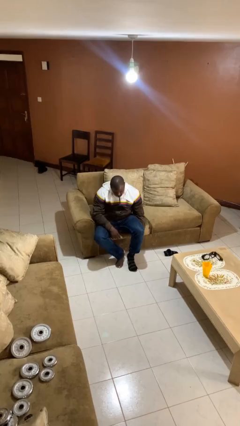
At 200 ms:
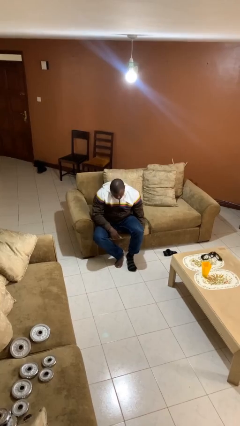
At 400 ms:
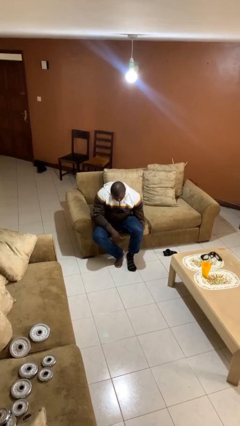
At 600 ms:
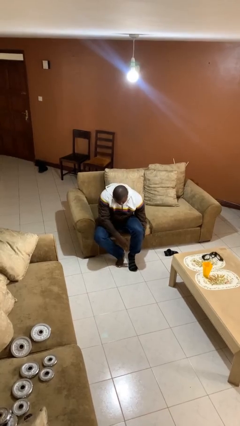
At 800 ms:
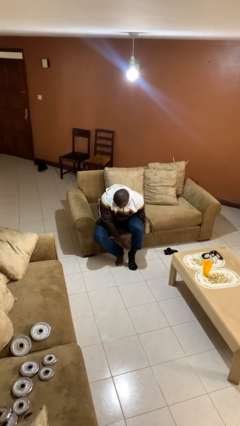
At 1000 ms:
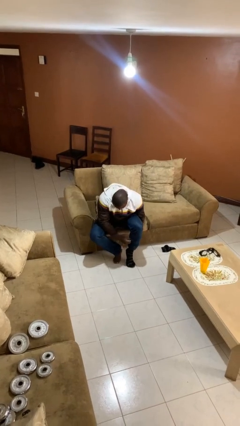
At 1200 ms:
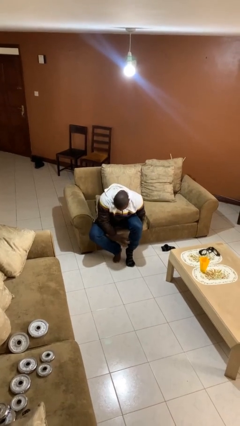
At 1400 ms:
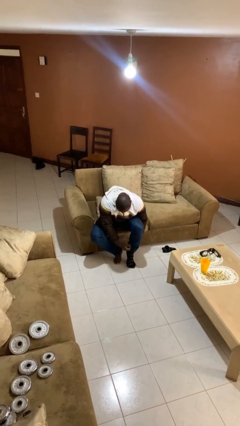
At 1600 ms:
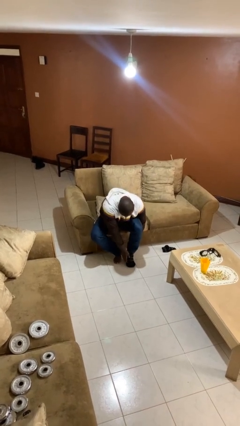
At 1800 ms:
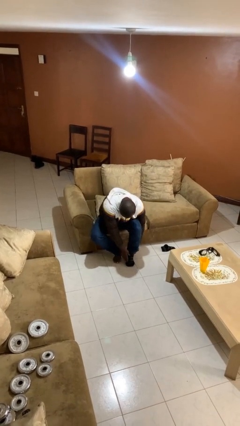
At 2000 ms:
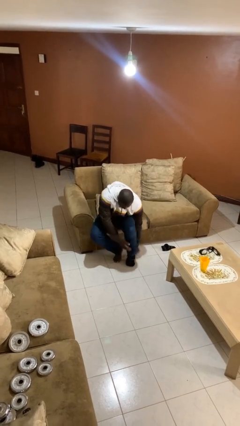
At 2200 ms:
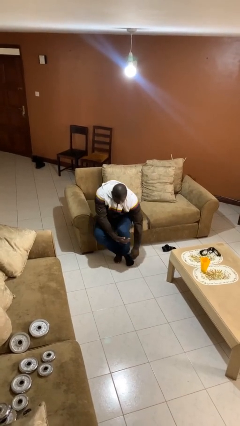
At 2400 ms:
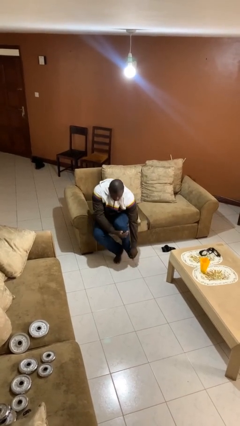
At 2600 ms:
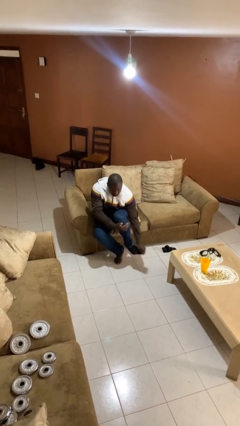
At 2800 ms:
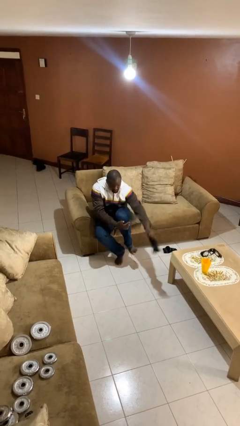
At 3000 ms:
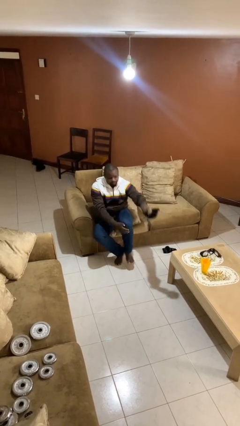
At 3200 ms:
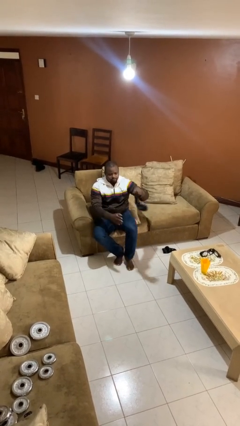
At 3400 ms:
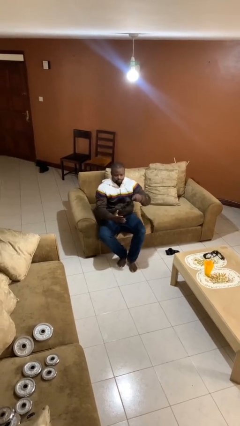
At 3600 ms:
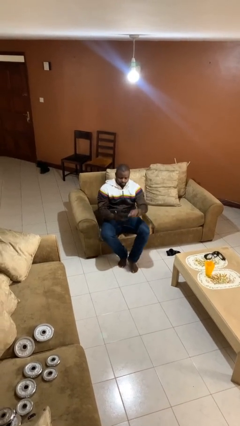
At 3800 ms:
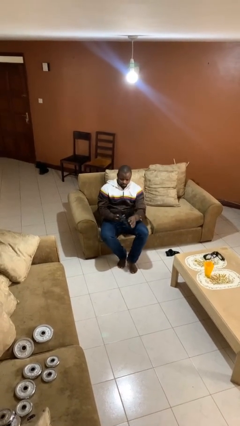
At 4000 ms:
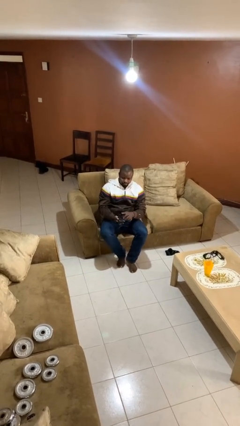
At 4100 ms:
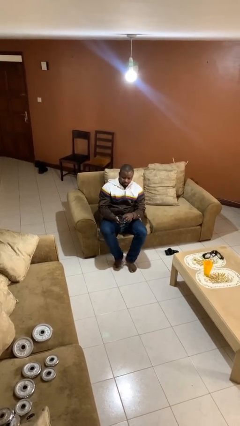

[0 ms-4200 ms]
person takes off socks

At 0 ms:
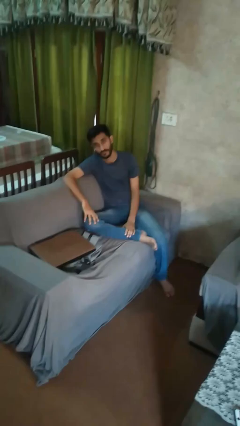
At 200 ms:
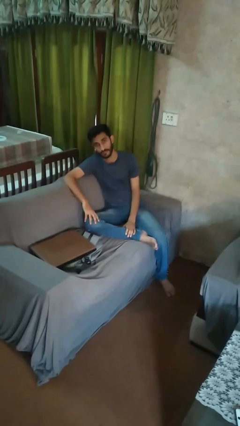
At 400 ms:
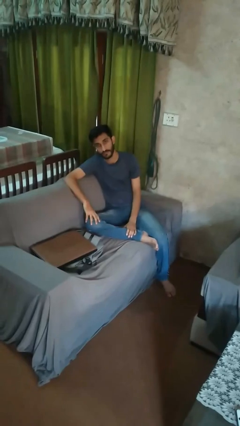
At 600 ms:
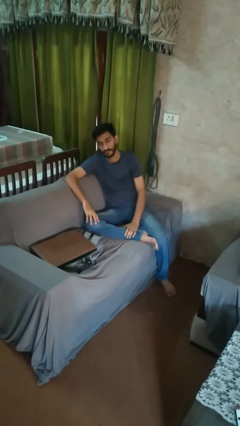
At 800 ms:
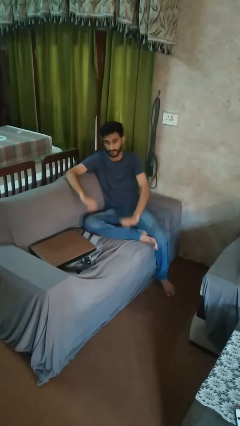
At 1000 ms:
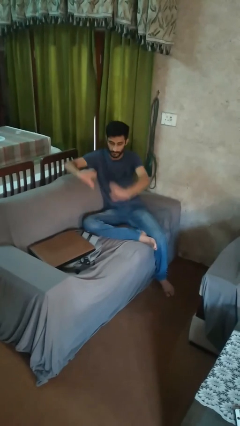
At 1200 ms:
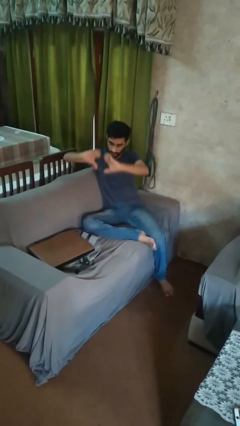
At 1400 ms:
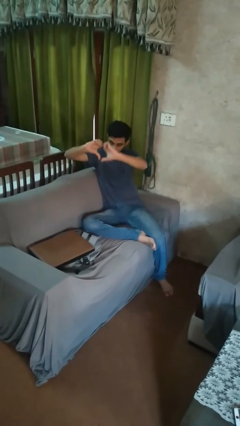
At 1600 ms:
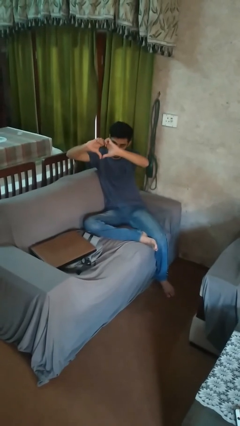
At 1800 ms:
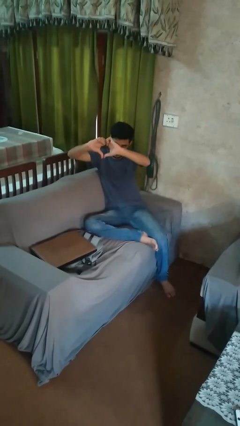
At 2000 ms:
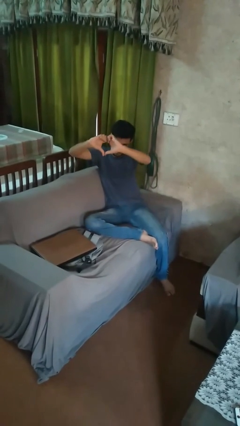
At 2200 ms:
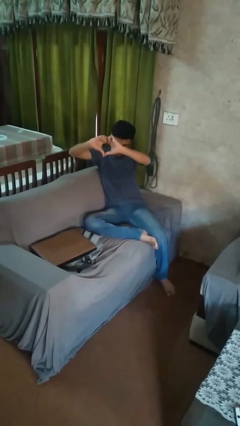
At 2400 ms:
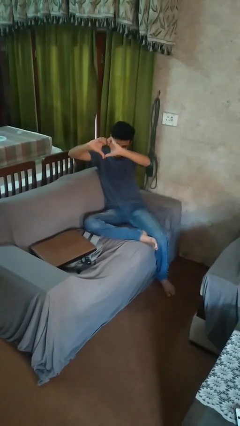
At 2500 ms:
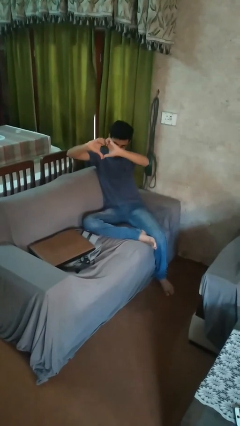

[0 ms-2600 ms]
person gestures heart

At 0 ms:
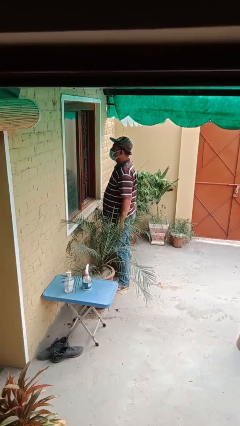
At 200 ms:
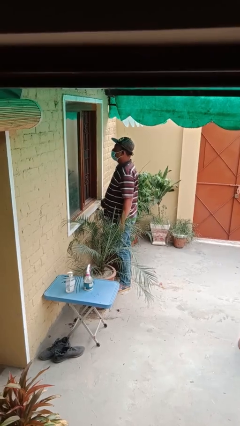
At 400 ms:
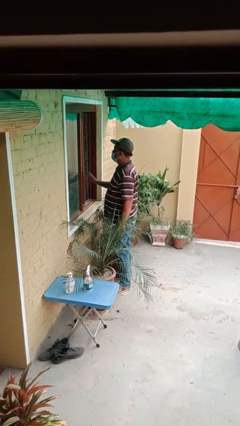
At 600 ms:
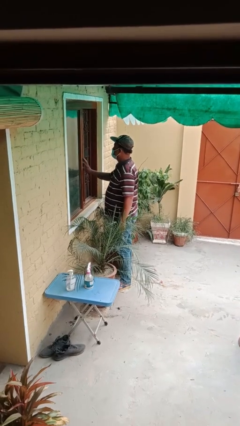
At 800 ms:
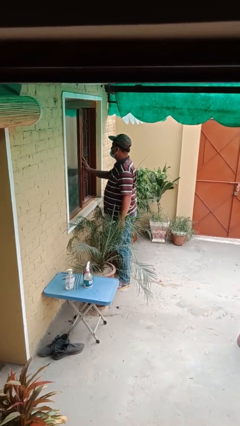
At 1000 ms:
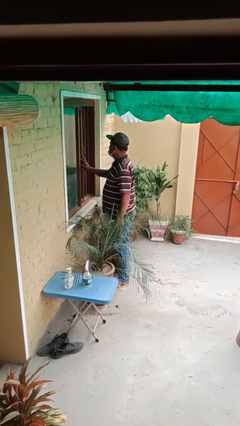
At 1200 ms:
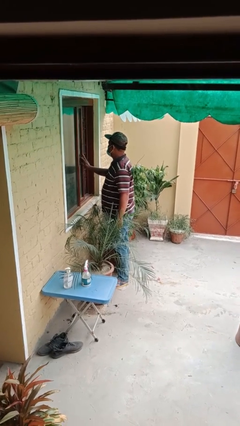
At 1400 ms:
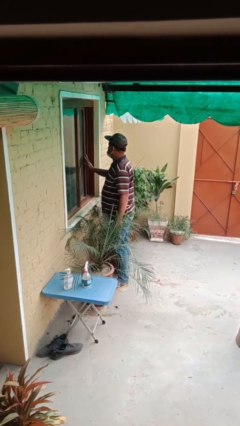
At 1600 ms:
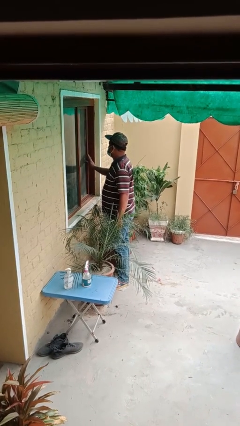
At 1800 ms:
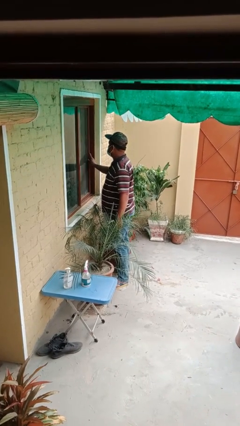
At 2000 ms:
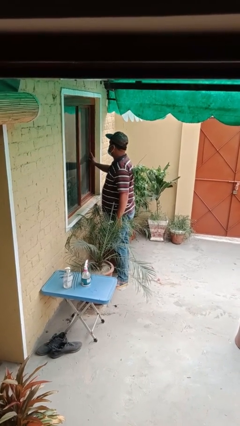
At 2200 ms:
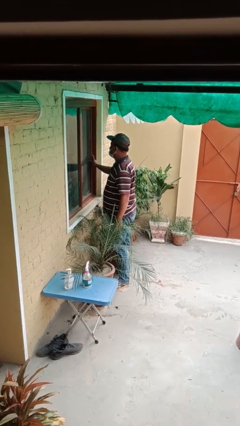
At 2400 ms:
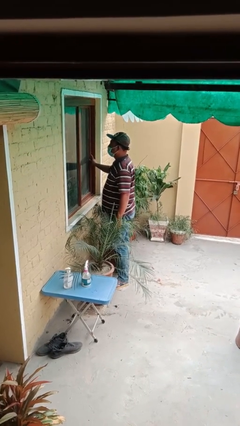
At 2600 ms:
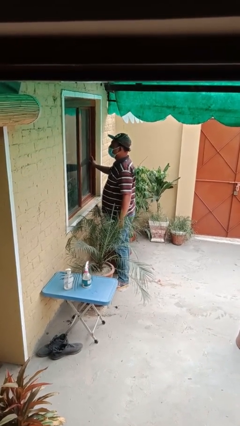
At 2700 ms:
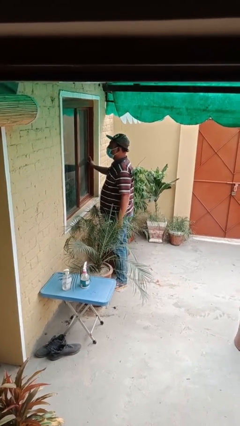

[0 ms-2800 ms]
person closes home window

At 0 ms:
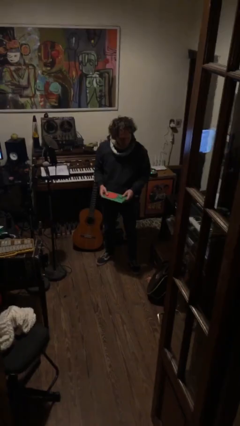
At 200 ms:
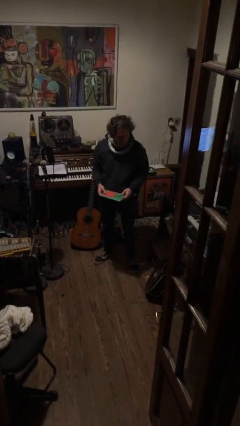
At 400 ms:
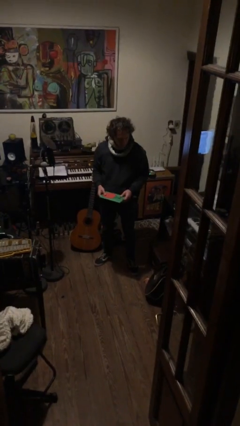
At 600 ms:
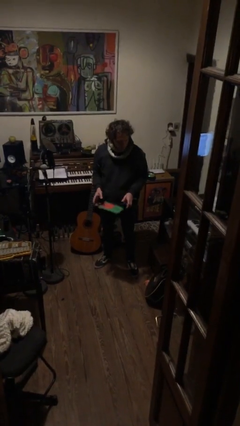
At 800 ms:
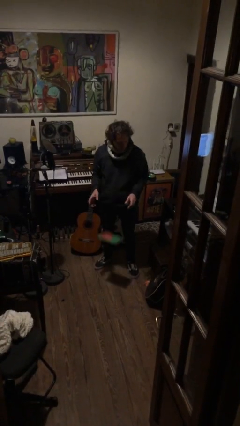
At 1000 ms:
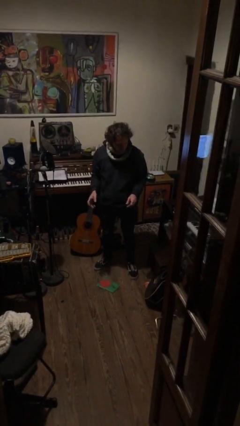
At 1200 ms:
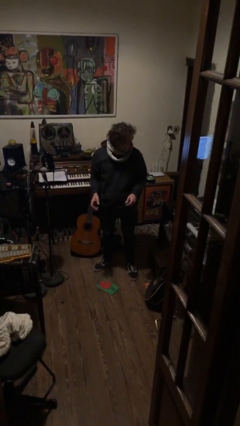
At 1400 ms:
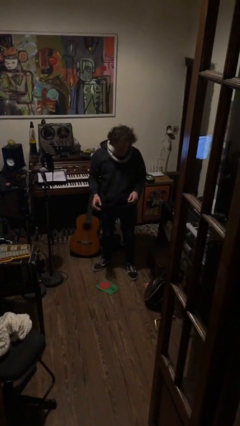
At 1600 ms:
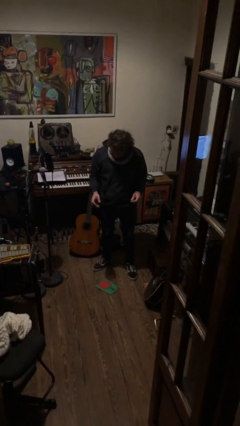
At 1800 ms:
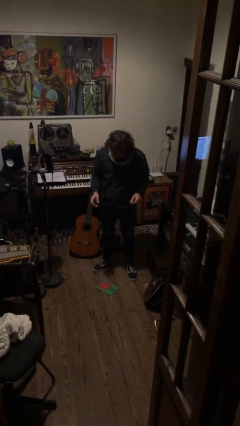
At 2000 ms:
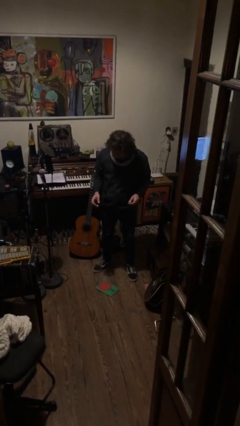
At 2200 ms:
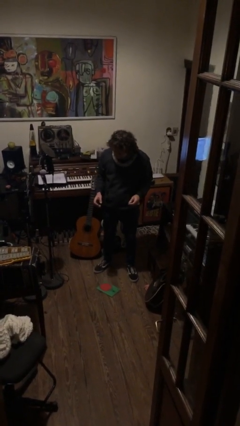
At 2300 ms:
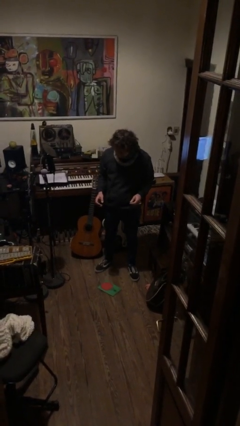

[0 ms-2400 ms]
person drops object

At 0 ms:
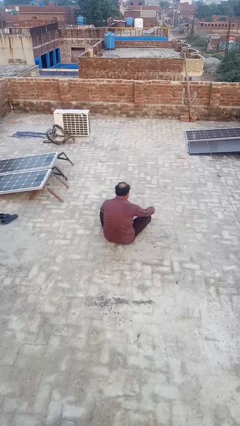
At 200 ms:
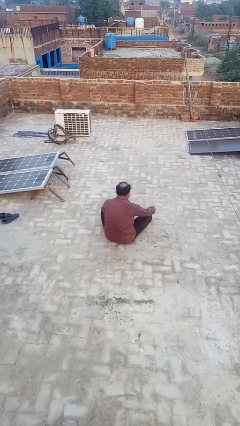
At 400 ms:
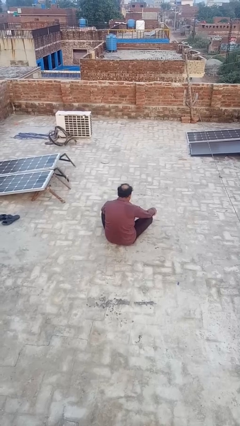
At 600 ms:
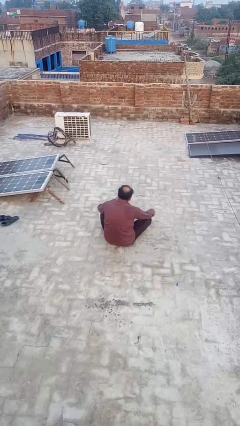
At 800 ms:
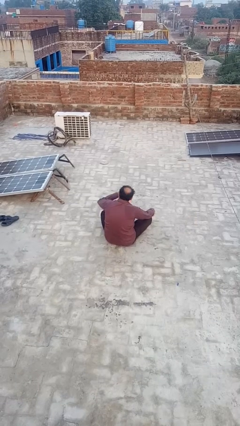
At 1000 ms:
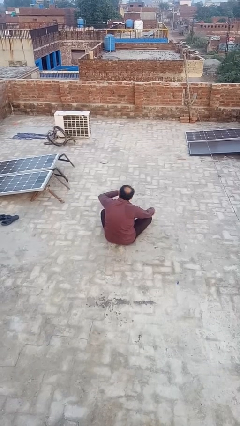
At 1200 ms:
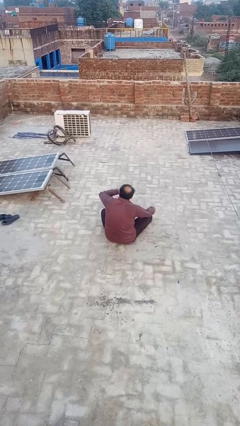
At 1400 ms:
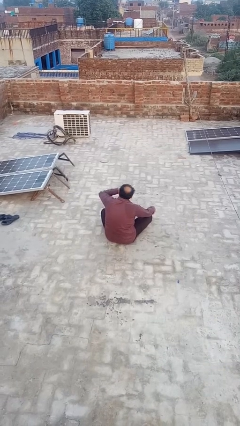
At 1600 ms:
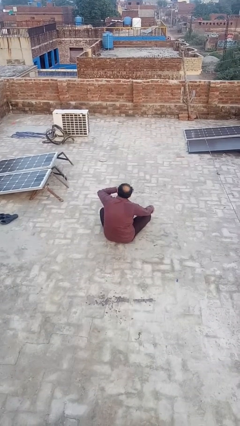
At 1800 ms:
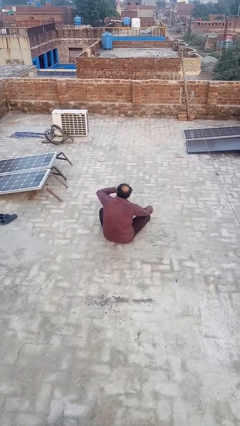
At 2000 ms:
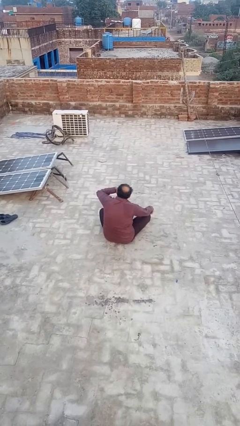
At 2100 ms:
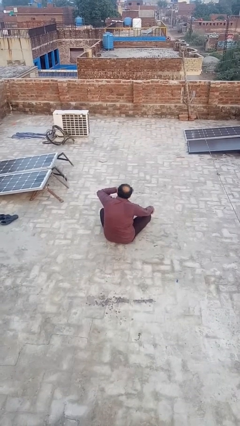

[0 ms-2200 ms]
person yawns

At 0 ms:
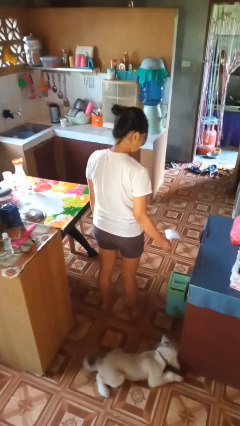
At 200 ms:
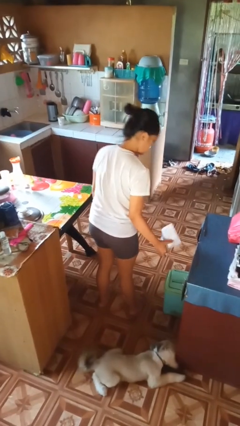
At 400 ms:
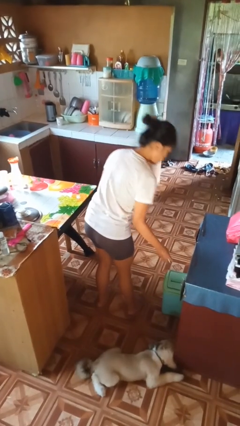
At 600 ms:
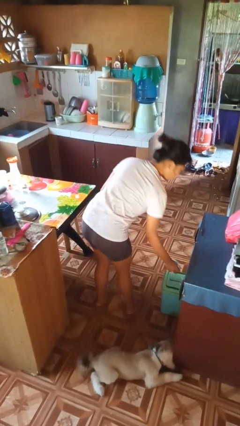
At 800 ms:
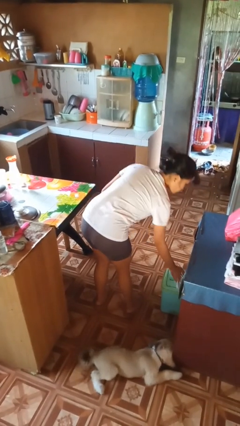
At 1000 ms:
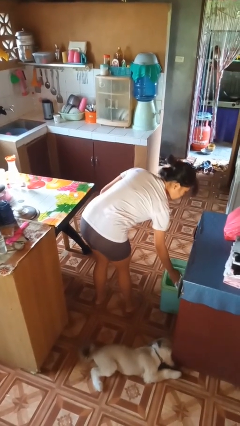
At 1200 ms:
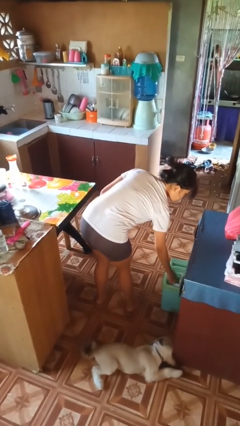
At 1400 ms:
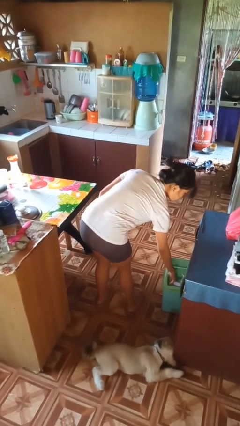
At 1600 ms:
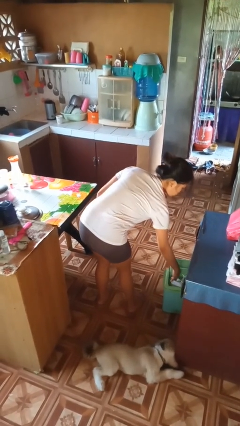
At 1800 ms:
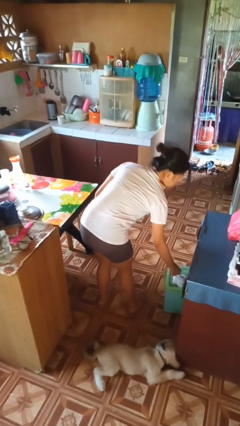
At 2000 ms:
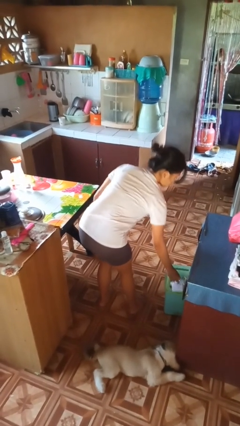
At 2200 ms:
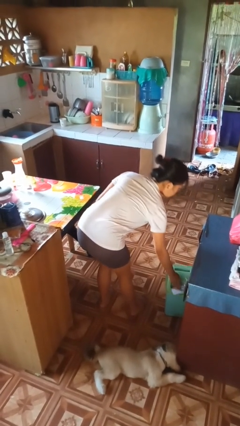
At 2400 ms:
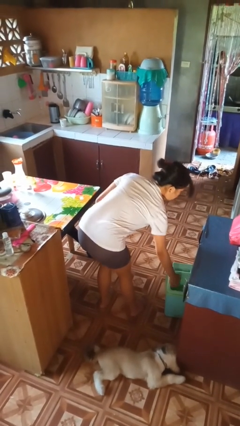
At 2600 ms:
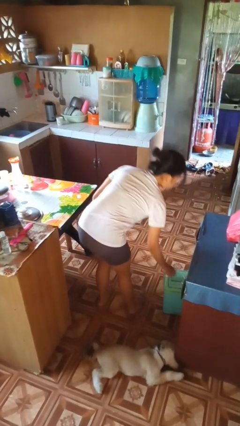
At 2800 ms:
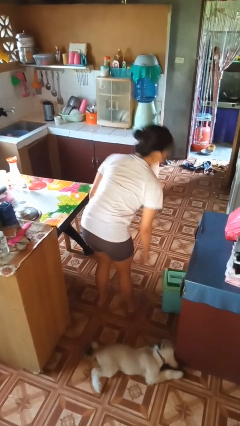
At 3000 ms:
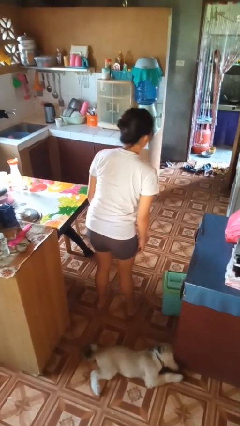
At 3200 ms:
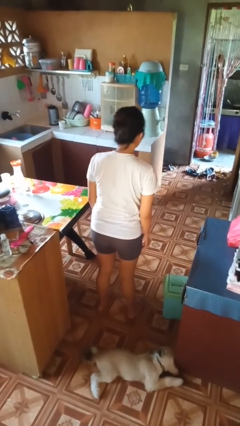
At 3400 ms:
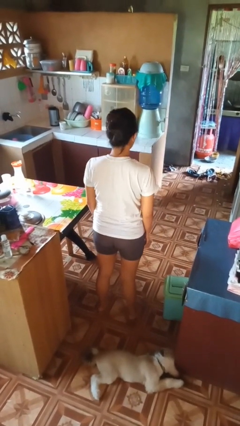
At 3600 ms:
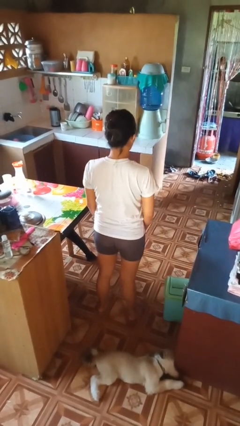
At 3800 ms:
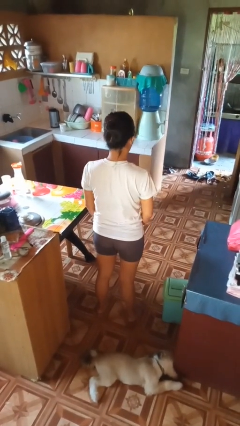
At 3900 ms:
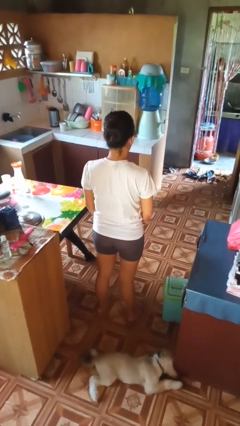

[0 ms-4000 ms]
person discards trash
